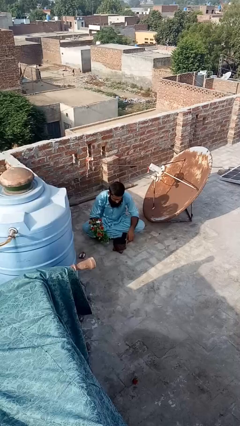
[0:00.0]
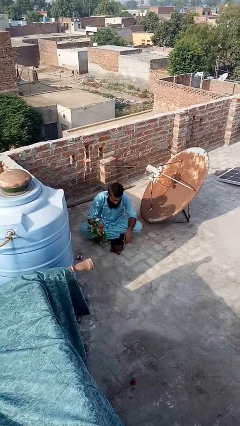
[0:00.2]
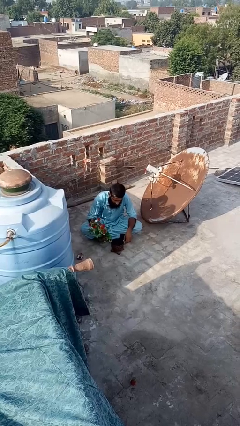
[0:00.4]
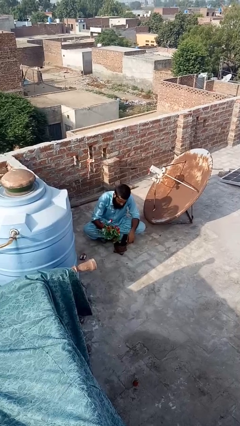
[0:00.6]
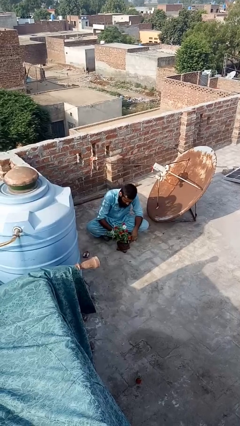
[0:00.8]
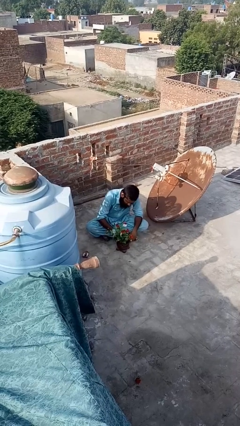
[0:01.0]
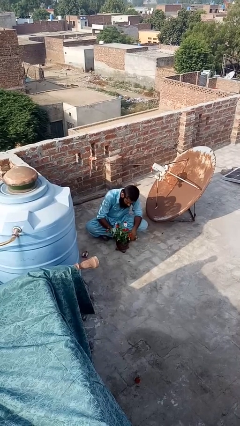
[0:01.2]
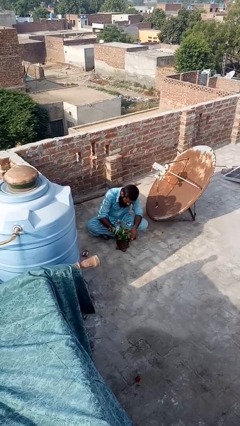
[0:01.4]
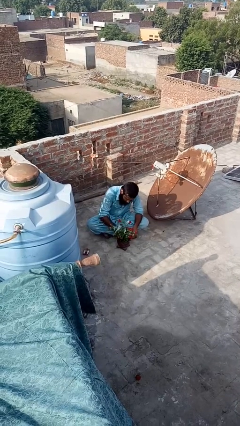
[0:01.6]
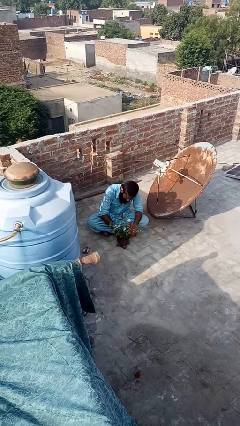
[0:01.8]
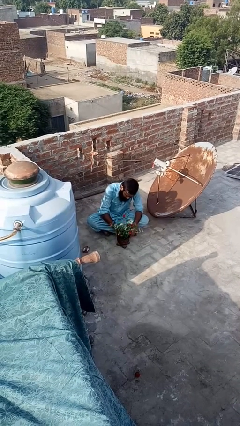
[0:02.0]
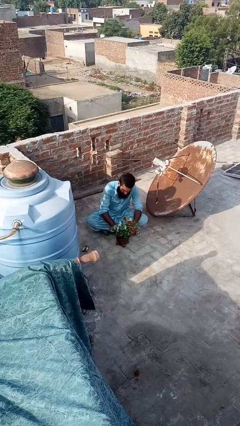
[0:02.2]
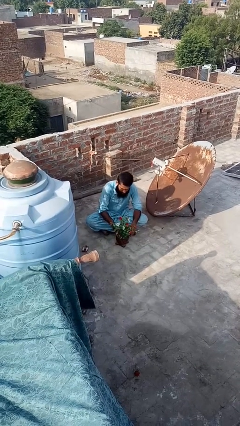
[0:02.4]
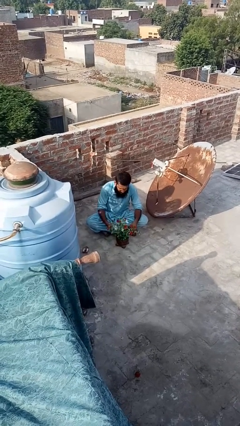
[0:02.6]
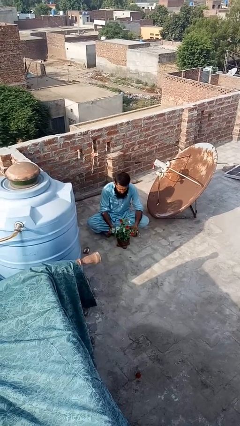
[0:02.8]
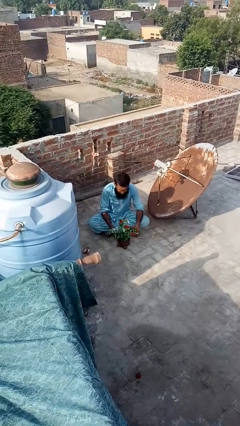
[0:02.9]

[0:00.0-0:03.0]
person arranges flowers in vase

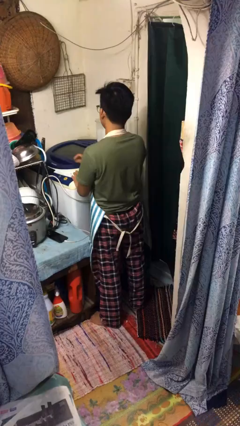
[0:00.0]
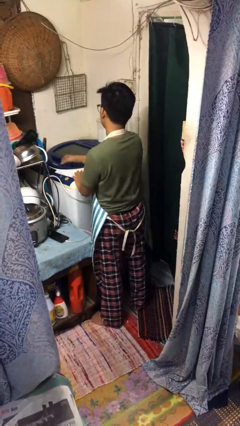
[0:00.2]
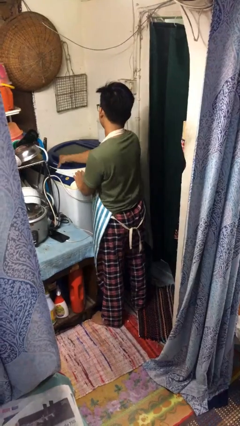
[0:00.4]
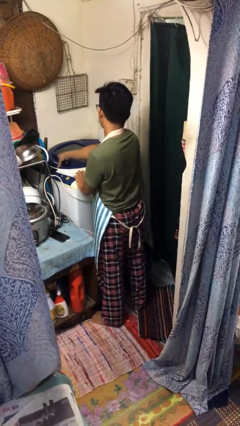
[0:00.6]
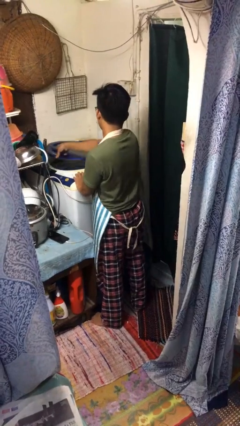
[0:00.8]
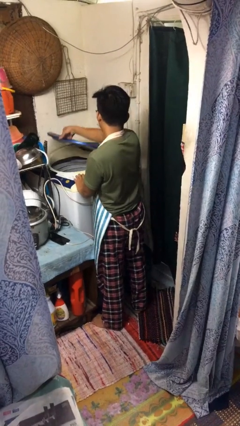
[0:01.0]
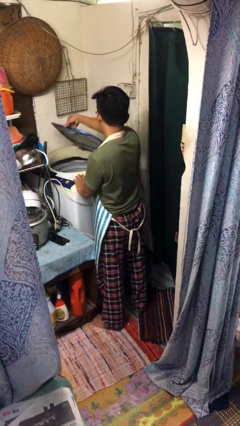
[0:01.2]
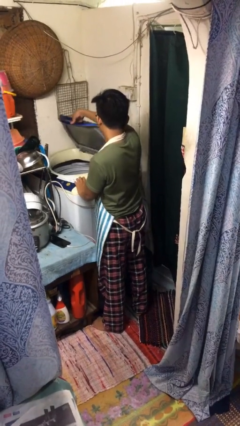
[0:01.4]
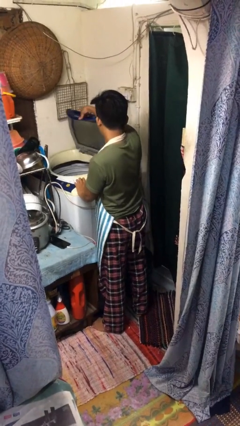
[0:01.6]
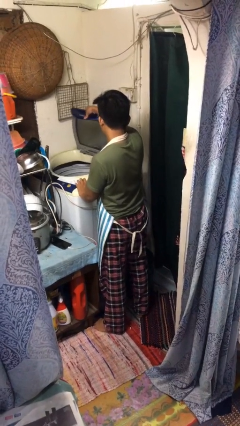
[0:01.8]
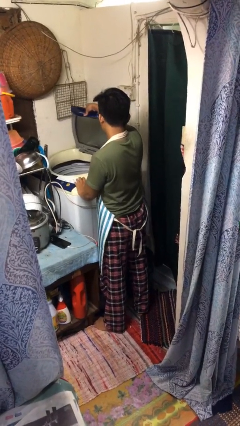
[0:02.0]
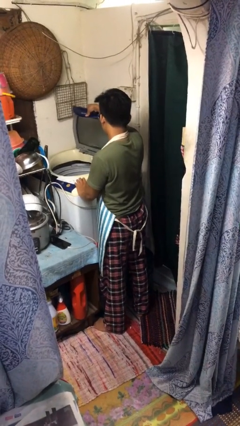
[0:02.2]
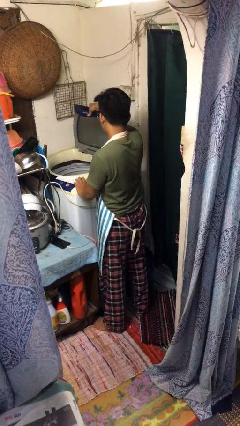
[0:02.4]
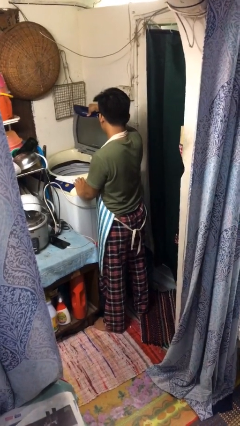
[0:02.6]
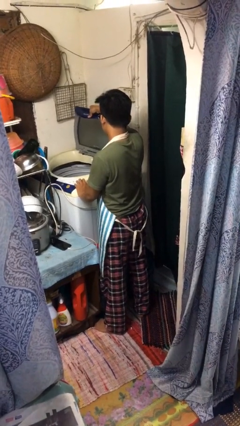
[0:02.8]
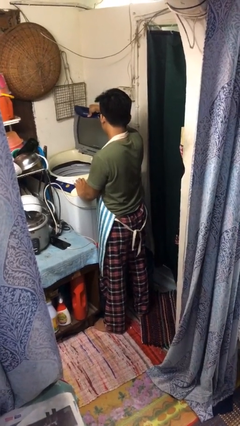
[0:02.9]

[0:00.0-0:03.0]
person opens clothes washer

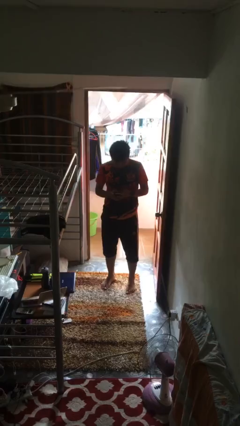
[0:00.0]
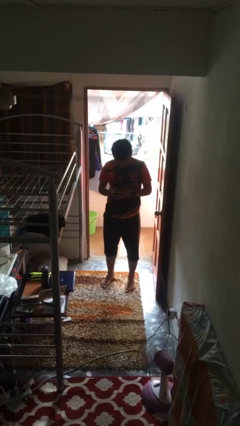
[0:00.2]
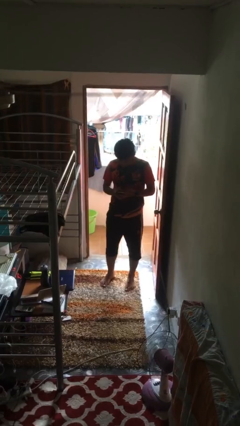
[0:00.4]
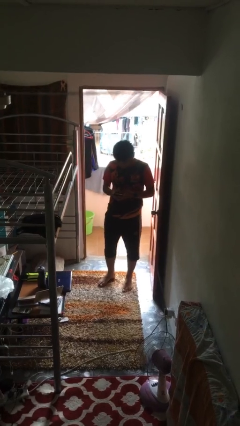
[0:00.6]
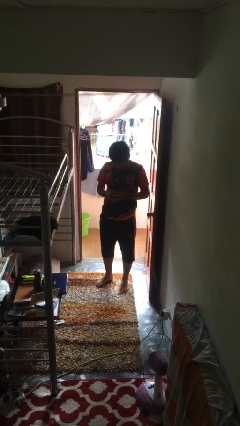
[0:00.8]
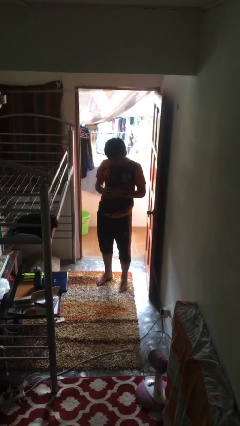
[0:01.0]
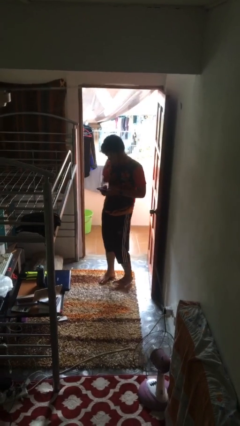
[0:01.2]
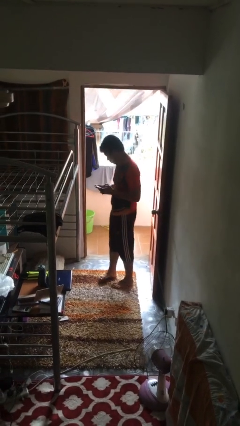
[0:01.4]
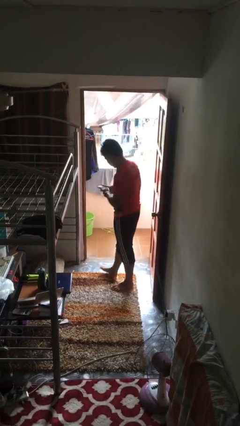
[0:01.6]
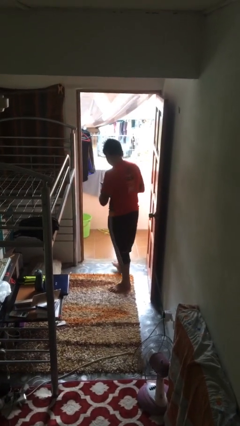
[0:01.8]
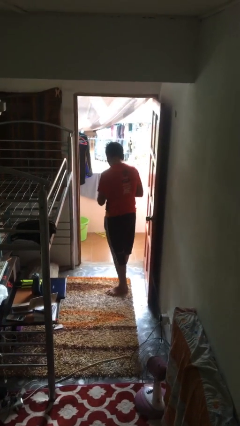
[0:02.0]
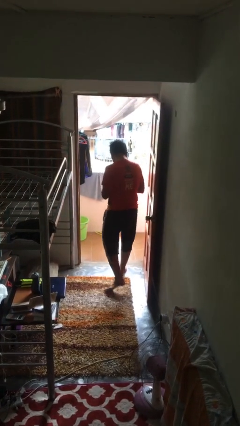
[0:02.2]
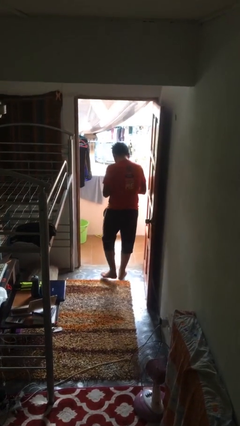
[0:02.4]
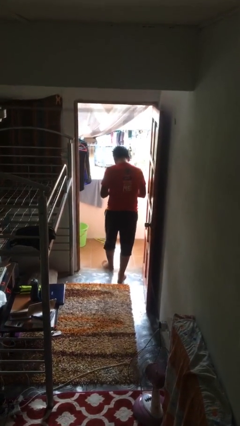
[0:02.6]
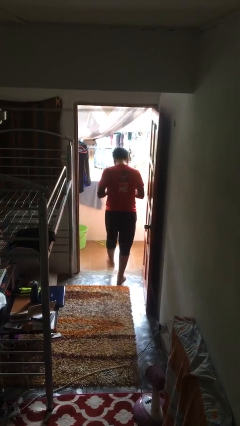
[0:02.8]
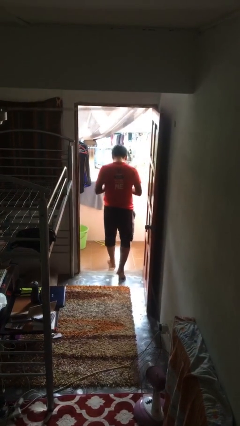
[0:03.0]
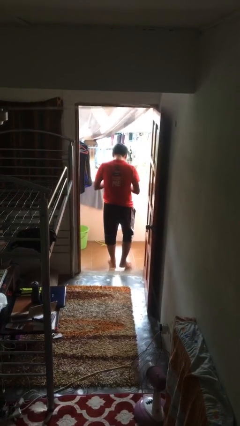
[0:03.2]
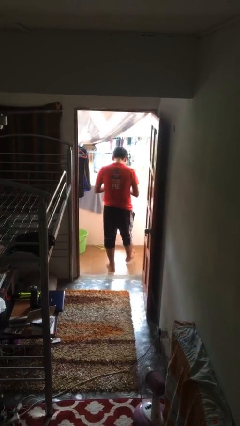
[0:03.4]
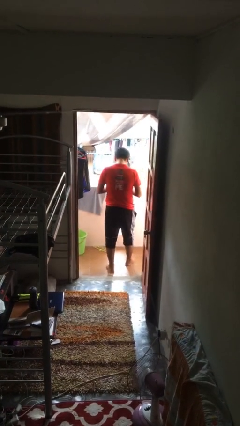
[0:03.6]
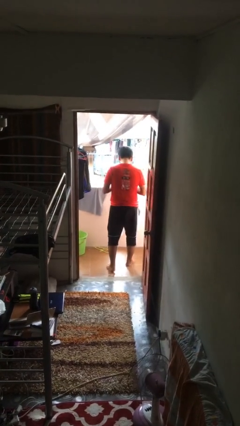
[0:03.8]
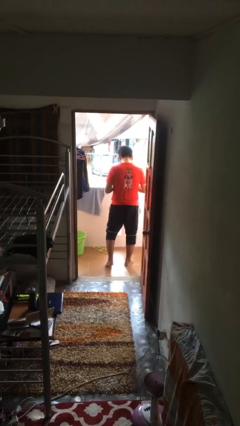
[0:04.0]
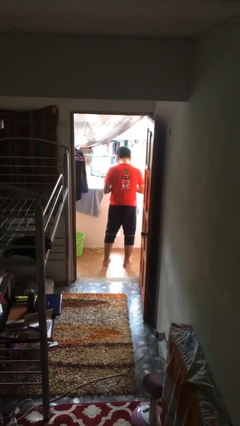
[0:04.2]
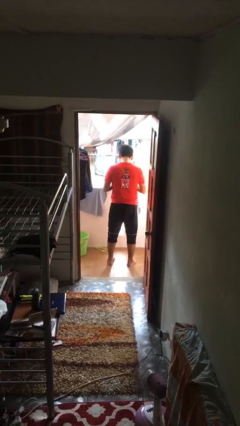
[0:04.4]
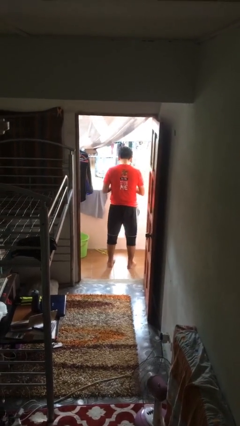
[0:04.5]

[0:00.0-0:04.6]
person exits scene through structure

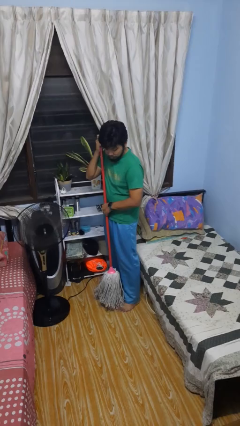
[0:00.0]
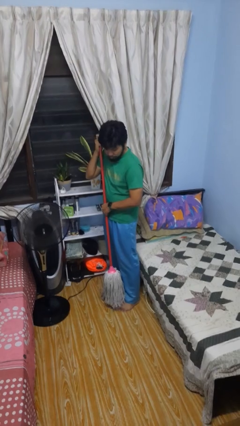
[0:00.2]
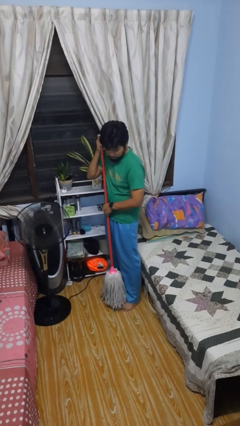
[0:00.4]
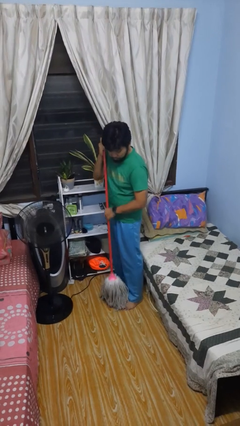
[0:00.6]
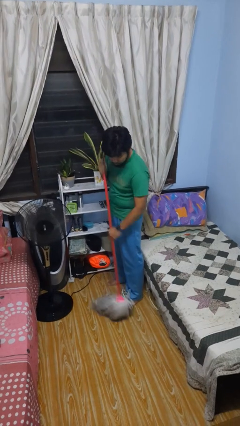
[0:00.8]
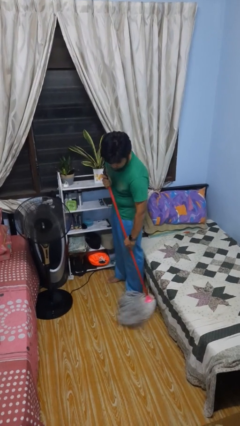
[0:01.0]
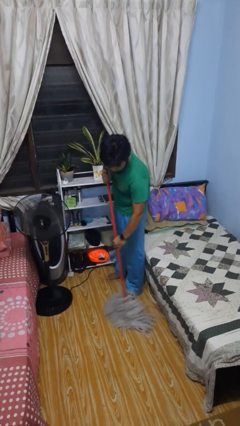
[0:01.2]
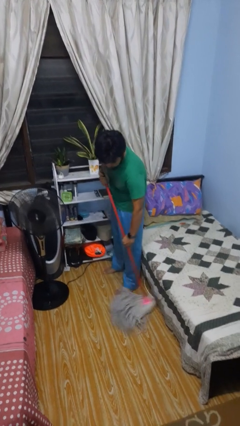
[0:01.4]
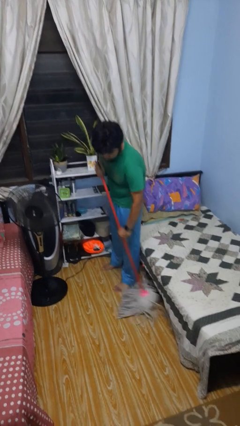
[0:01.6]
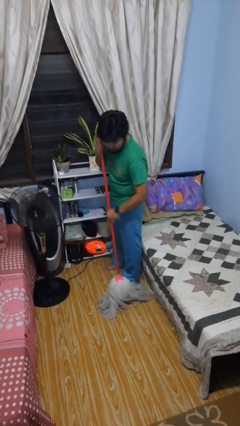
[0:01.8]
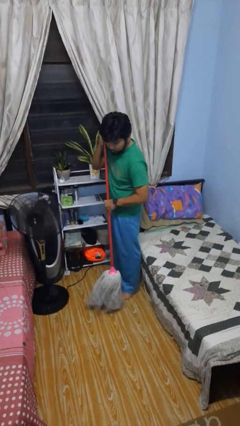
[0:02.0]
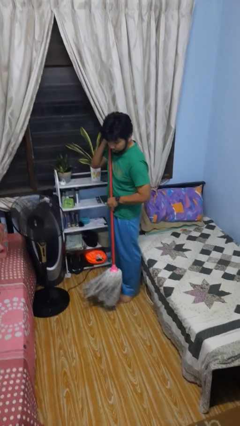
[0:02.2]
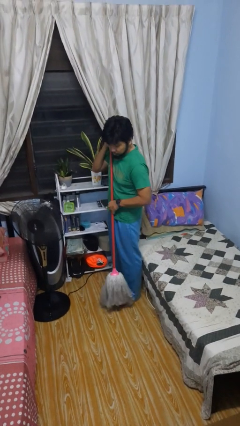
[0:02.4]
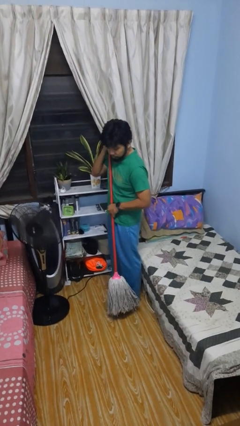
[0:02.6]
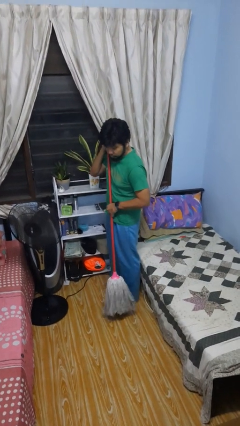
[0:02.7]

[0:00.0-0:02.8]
person mops

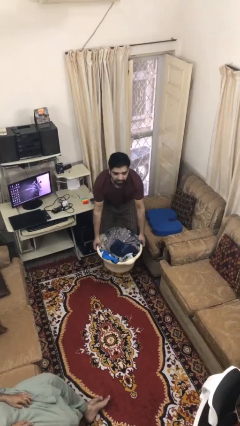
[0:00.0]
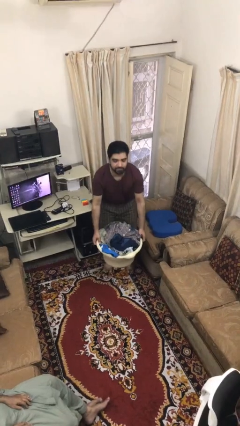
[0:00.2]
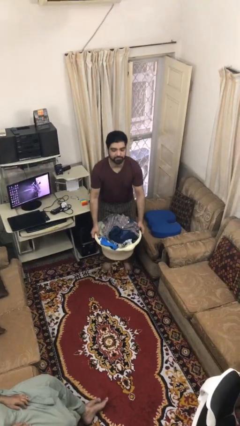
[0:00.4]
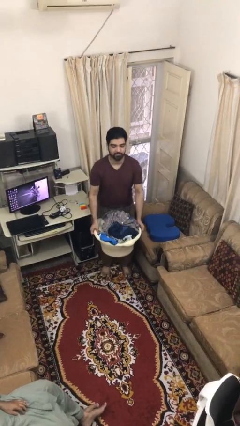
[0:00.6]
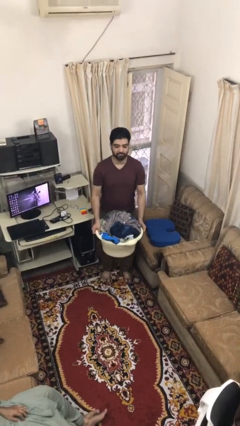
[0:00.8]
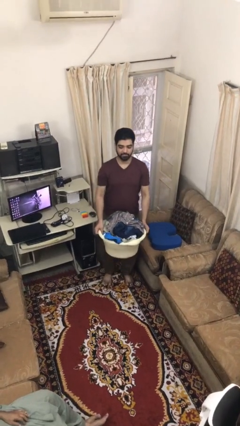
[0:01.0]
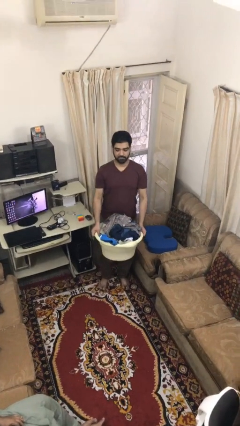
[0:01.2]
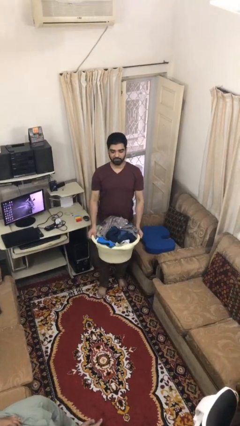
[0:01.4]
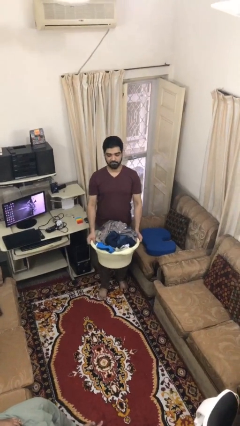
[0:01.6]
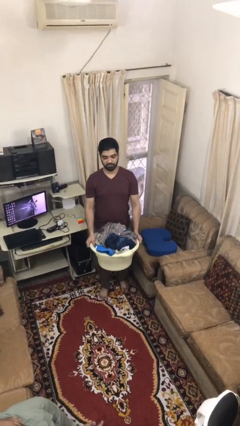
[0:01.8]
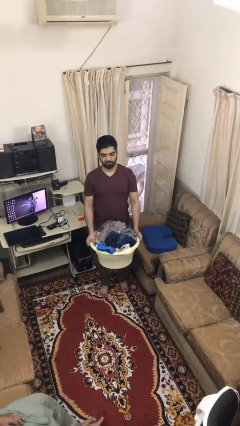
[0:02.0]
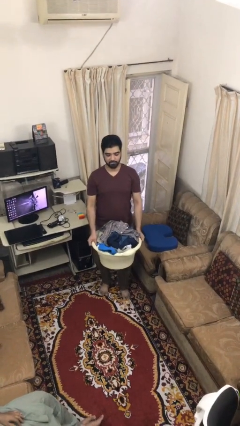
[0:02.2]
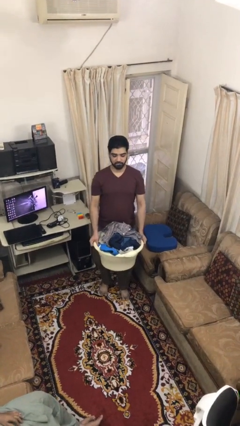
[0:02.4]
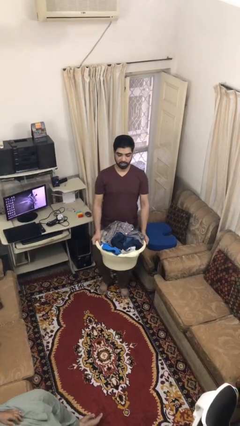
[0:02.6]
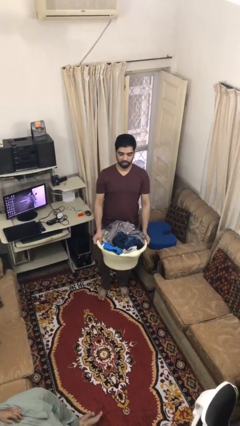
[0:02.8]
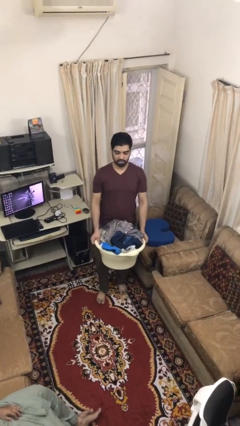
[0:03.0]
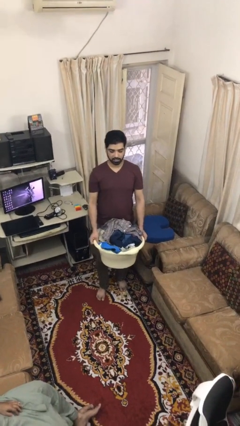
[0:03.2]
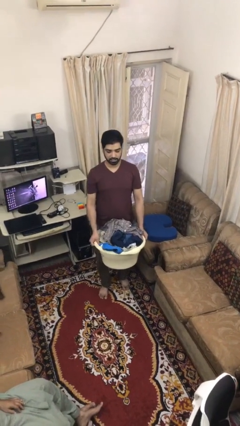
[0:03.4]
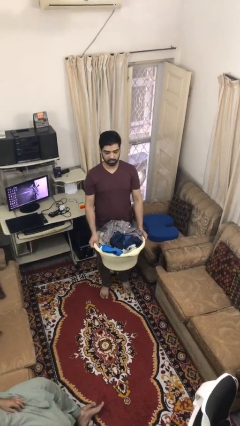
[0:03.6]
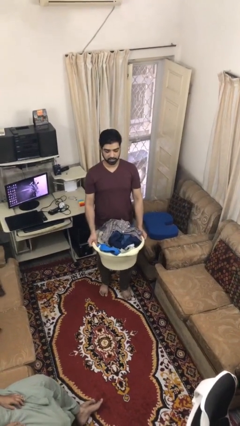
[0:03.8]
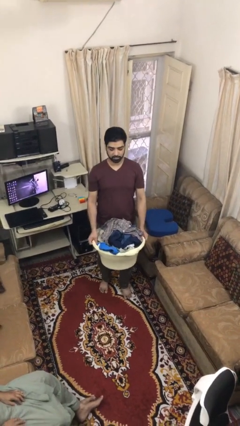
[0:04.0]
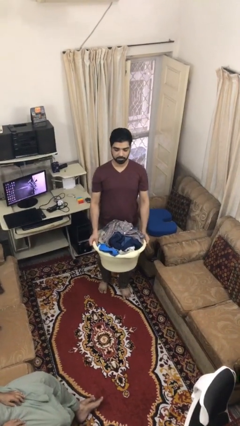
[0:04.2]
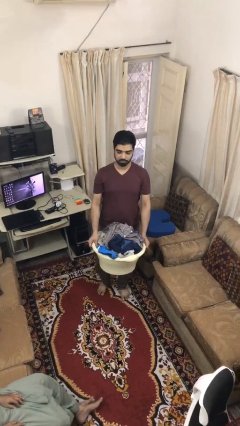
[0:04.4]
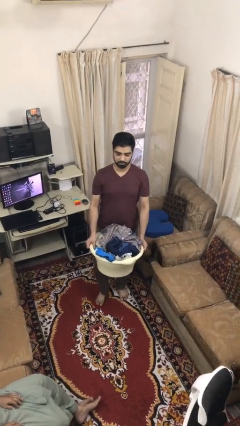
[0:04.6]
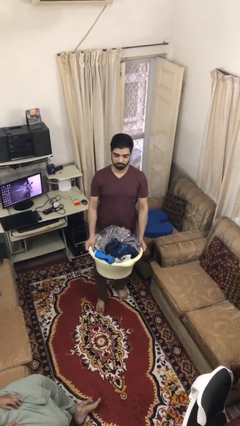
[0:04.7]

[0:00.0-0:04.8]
person carries heavy object
